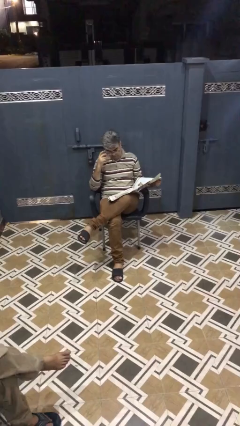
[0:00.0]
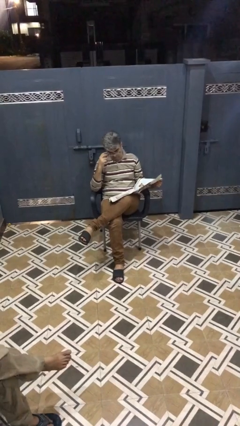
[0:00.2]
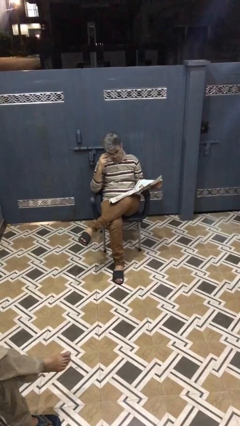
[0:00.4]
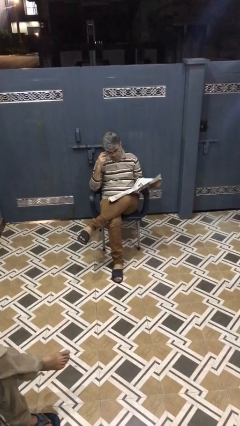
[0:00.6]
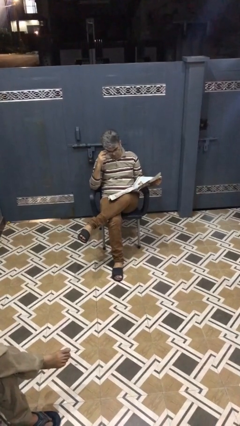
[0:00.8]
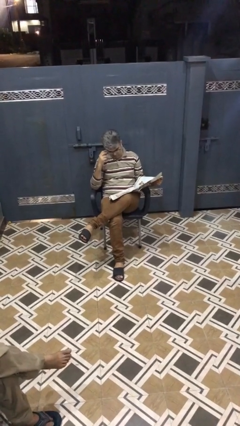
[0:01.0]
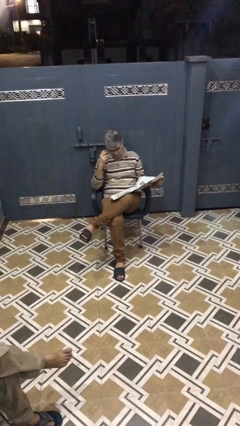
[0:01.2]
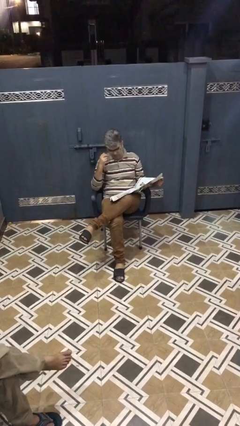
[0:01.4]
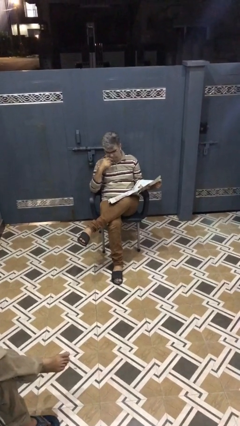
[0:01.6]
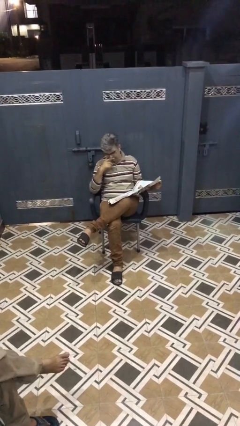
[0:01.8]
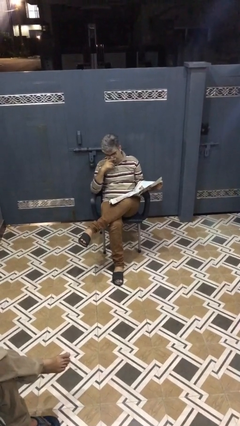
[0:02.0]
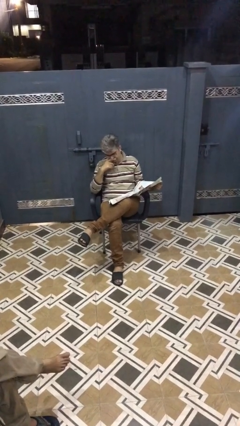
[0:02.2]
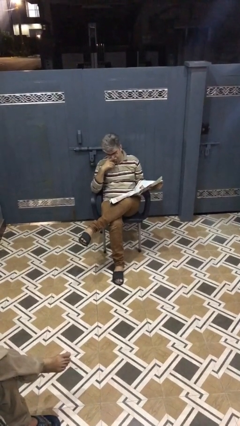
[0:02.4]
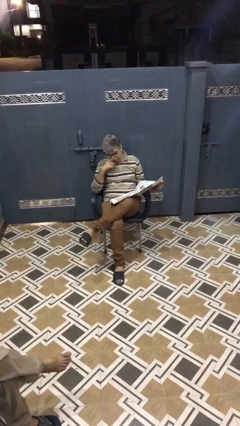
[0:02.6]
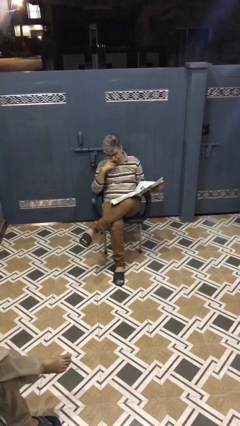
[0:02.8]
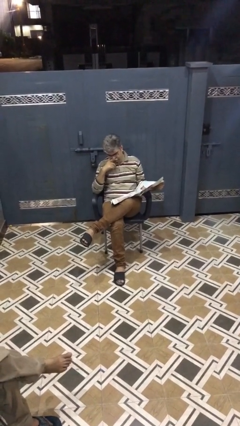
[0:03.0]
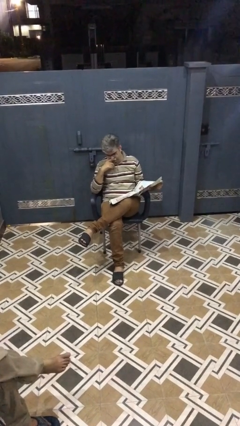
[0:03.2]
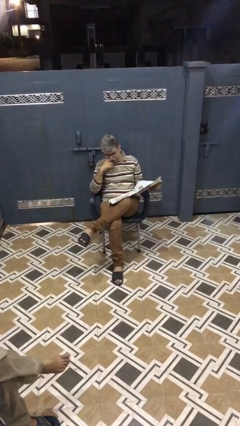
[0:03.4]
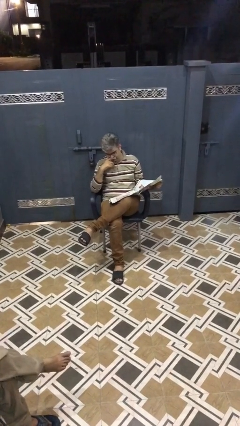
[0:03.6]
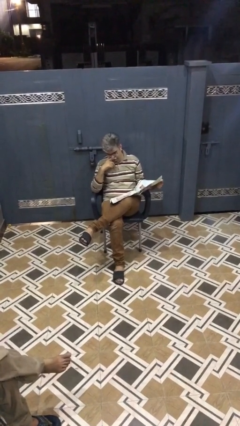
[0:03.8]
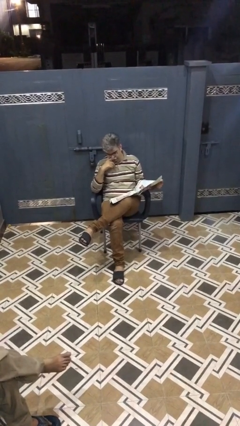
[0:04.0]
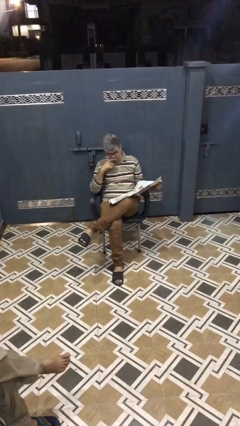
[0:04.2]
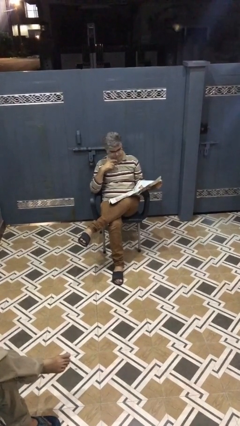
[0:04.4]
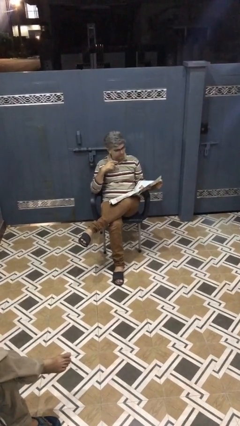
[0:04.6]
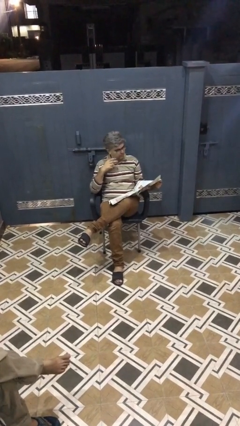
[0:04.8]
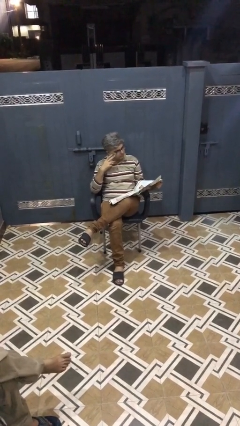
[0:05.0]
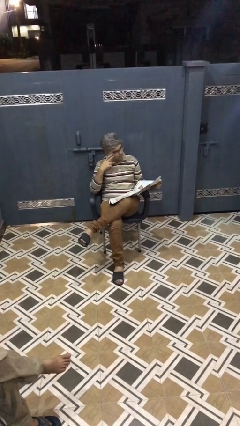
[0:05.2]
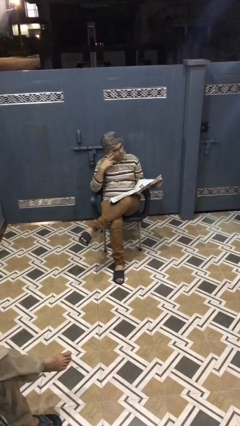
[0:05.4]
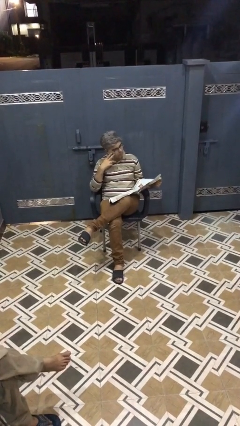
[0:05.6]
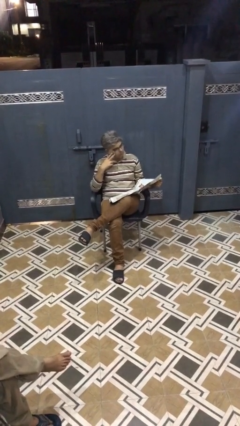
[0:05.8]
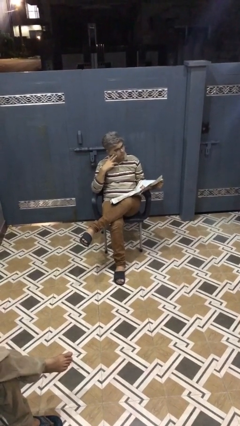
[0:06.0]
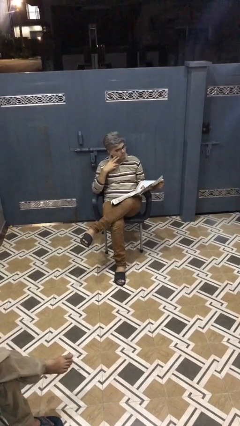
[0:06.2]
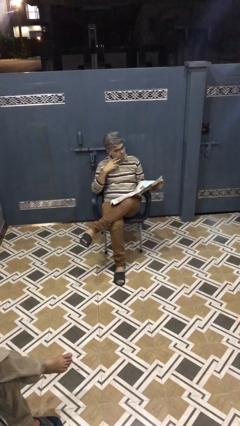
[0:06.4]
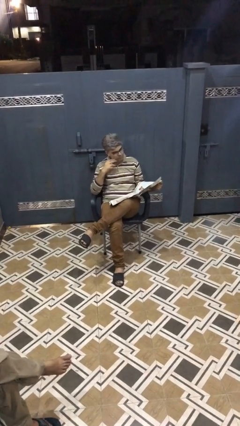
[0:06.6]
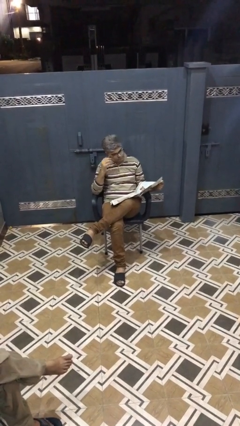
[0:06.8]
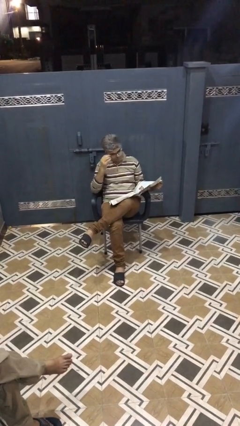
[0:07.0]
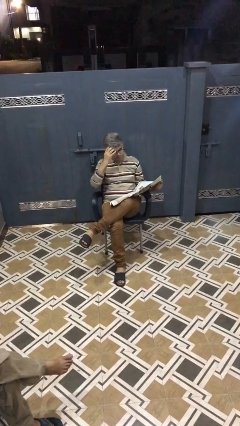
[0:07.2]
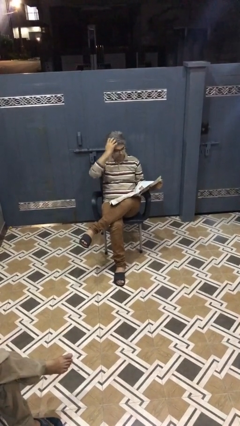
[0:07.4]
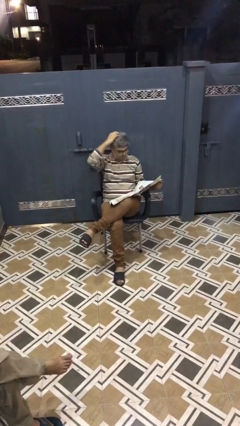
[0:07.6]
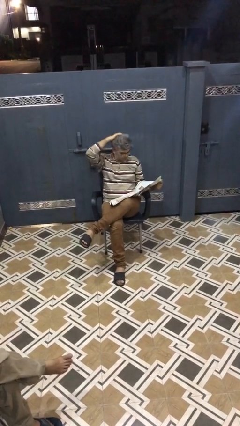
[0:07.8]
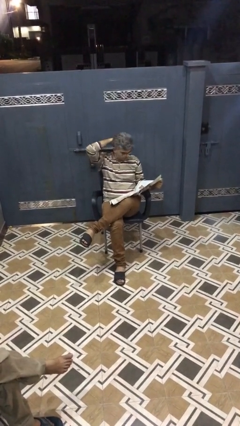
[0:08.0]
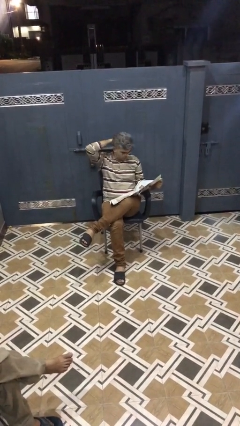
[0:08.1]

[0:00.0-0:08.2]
person reads document

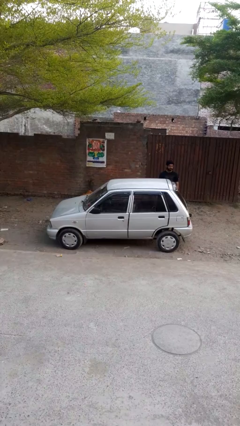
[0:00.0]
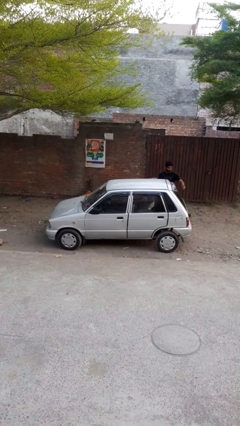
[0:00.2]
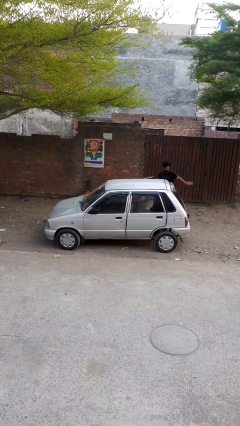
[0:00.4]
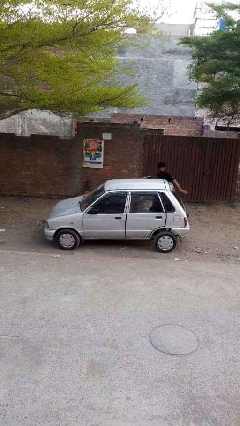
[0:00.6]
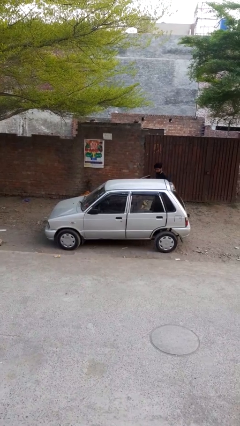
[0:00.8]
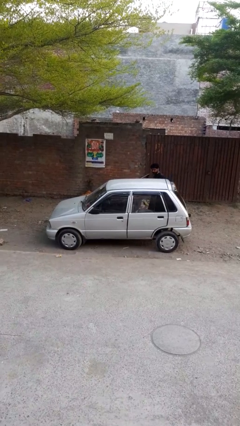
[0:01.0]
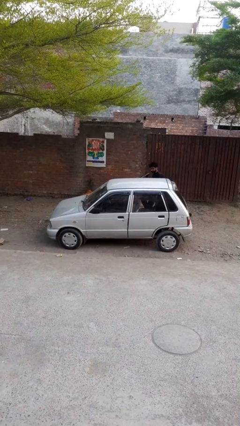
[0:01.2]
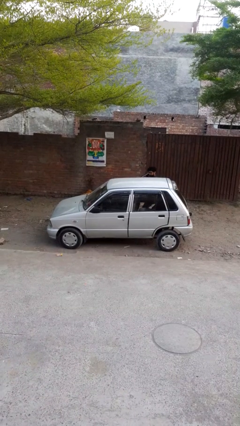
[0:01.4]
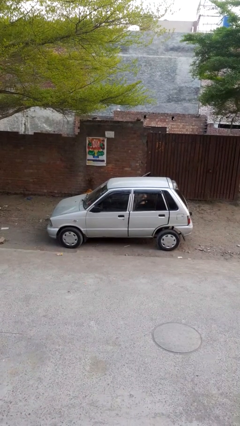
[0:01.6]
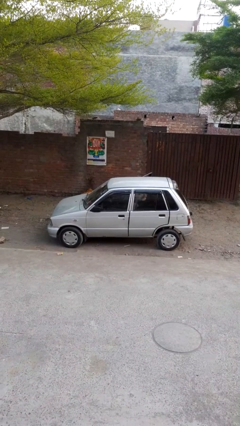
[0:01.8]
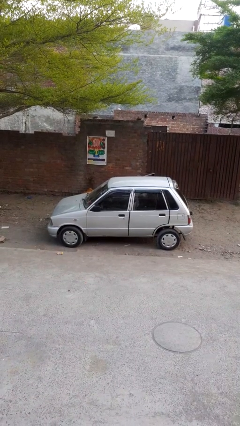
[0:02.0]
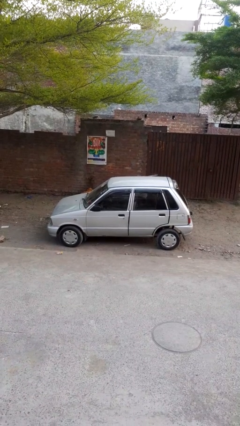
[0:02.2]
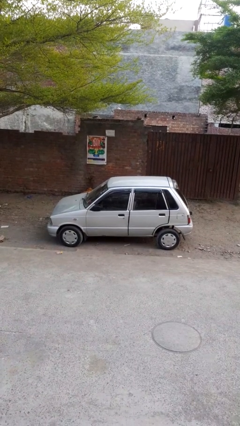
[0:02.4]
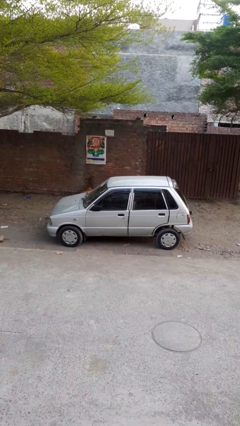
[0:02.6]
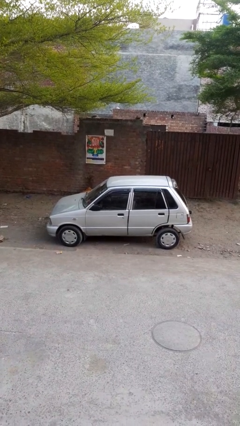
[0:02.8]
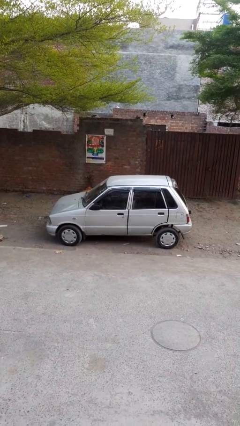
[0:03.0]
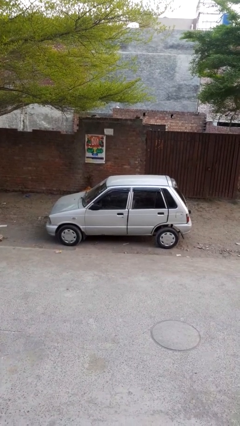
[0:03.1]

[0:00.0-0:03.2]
car picks up person

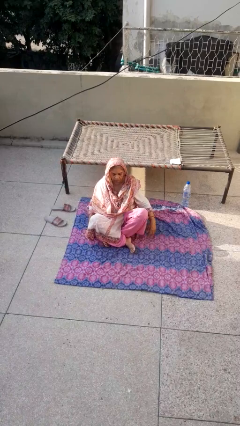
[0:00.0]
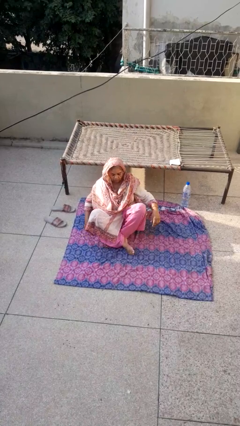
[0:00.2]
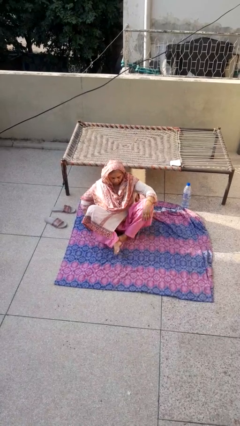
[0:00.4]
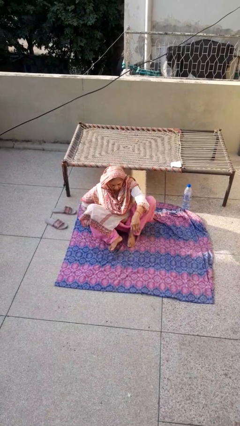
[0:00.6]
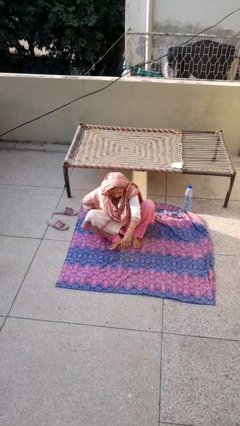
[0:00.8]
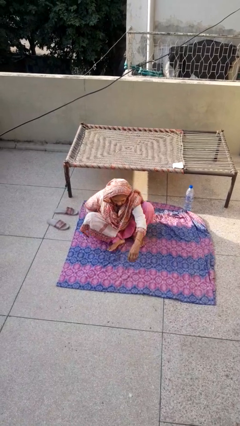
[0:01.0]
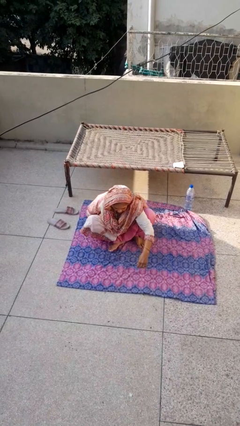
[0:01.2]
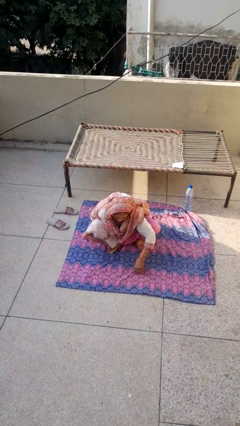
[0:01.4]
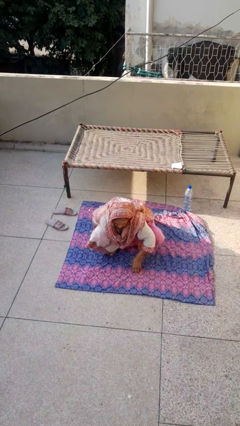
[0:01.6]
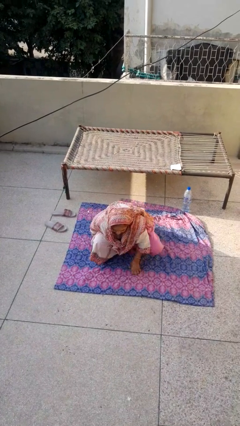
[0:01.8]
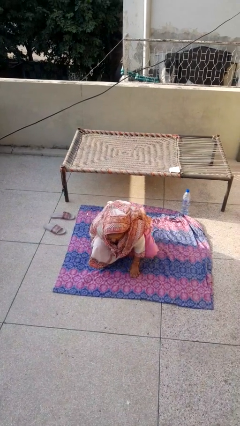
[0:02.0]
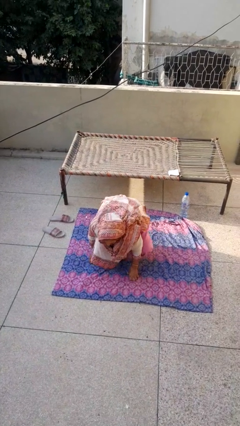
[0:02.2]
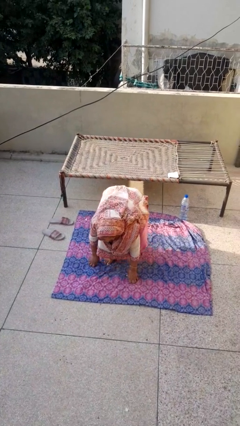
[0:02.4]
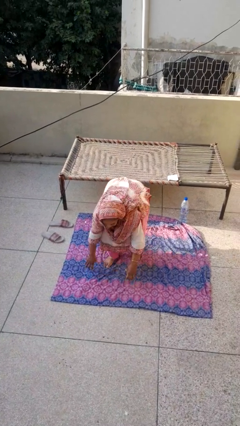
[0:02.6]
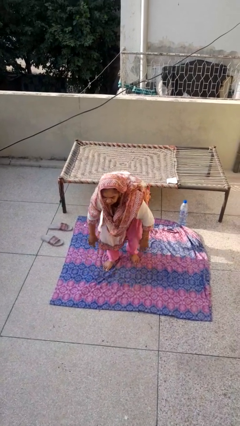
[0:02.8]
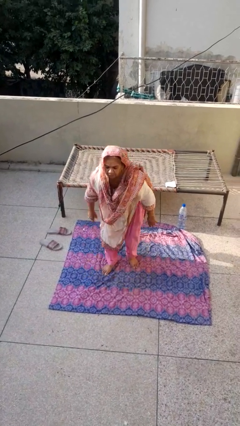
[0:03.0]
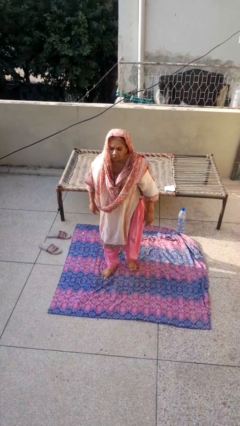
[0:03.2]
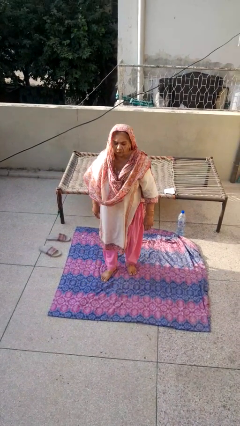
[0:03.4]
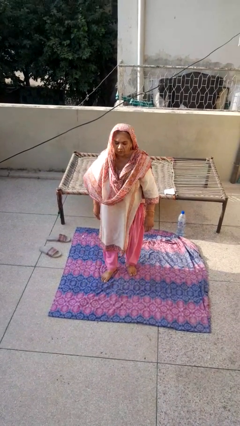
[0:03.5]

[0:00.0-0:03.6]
person stands up from floor

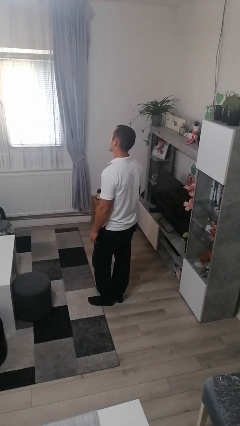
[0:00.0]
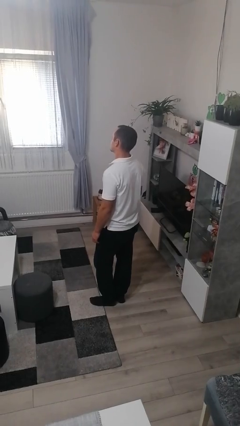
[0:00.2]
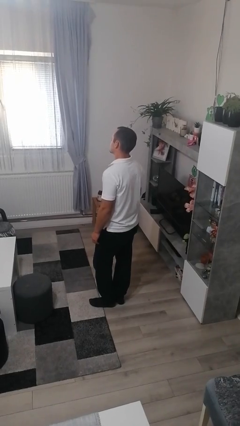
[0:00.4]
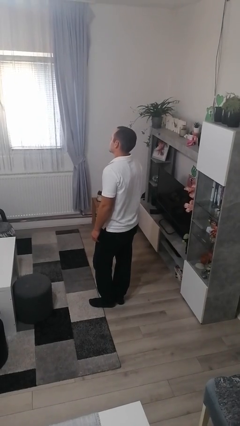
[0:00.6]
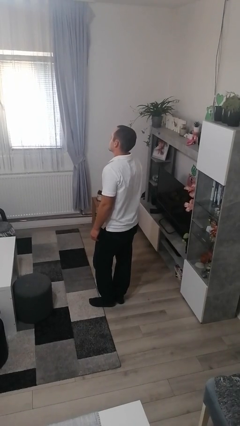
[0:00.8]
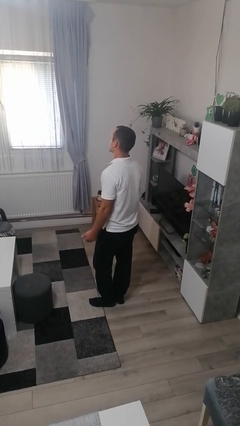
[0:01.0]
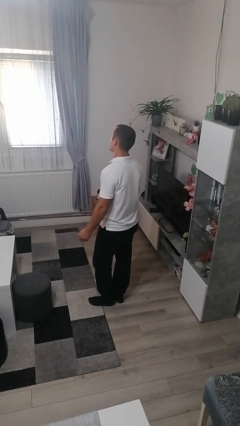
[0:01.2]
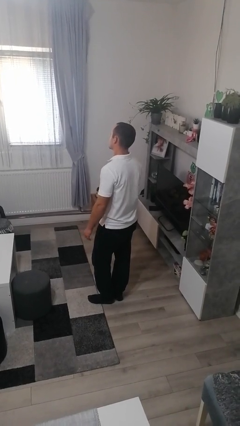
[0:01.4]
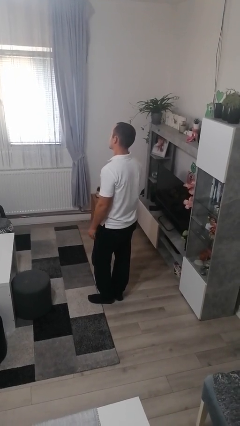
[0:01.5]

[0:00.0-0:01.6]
person shrugs

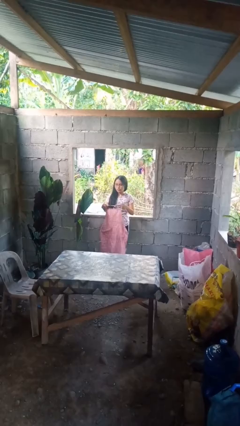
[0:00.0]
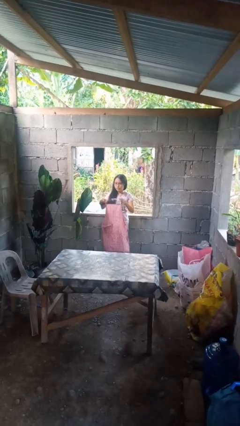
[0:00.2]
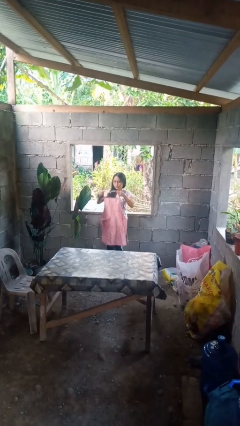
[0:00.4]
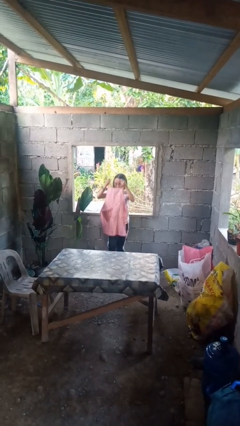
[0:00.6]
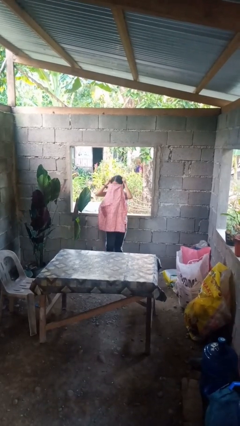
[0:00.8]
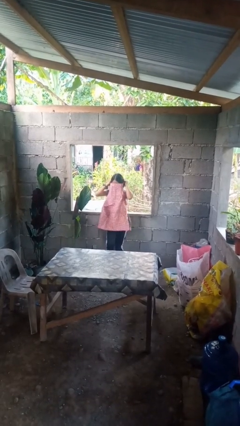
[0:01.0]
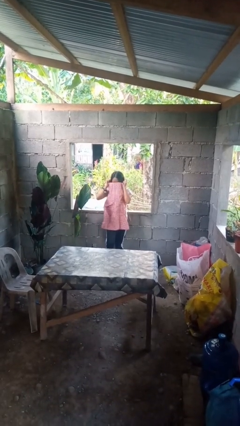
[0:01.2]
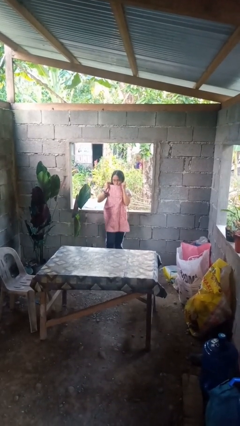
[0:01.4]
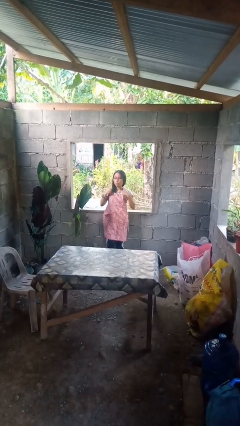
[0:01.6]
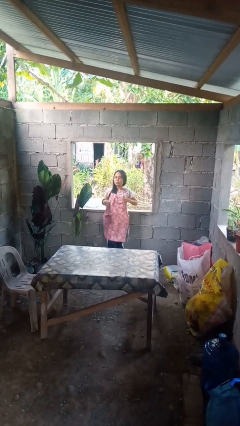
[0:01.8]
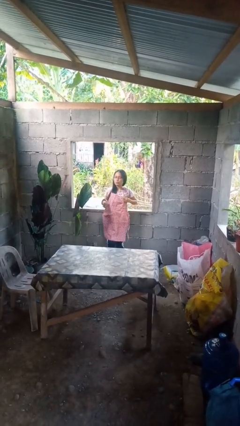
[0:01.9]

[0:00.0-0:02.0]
person puts on apron
